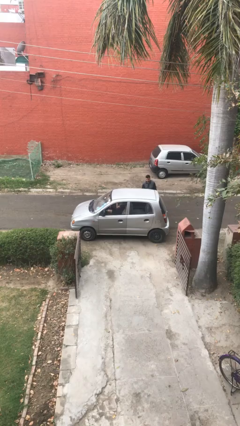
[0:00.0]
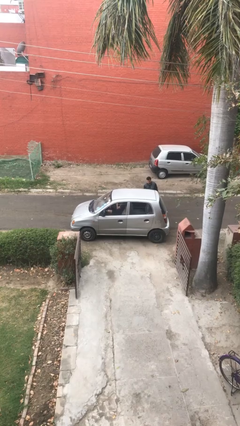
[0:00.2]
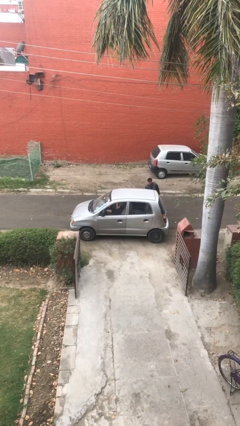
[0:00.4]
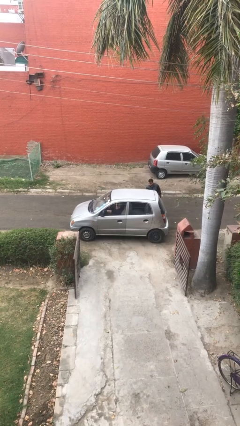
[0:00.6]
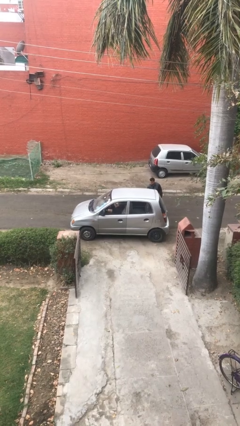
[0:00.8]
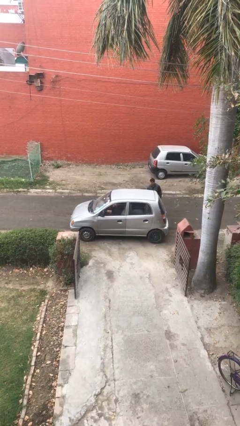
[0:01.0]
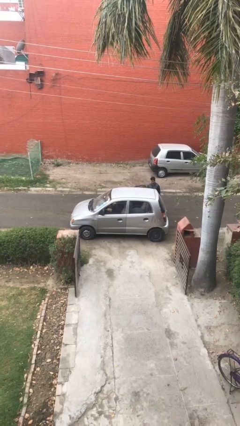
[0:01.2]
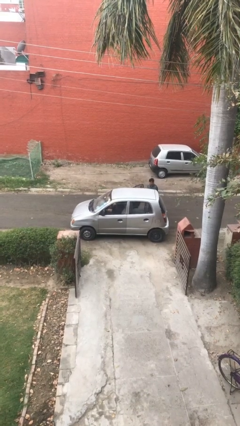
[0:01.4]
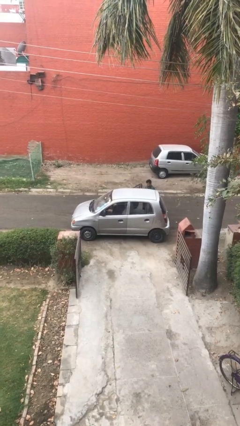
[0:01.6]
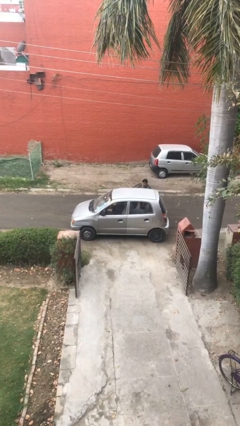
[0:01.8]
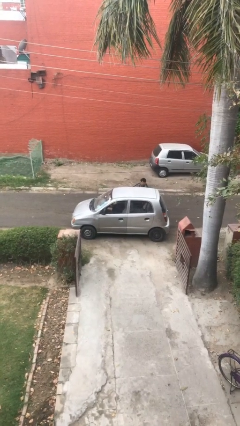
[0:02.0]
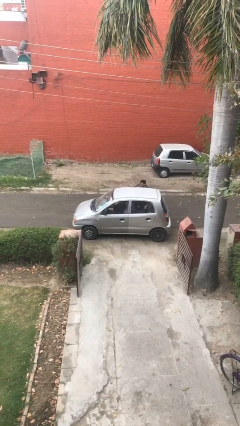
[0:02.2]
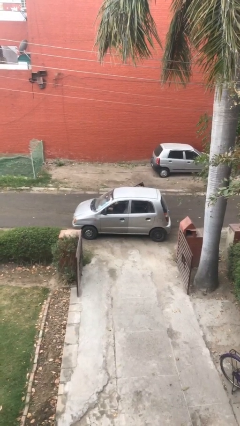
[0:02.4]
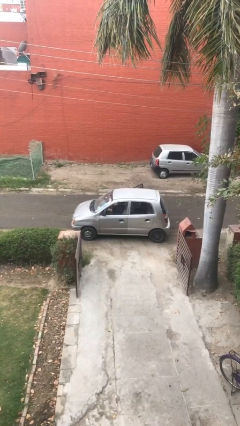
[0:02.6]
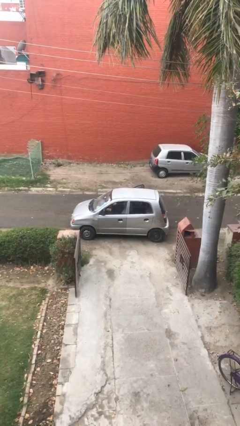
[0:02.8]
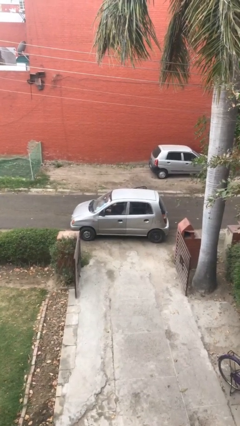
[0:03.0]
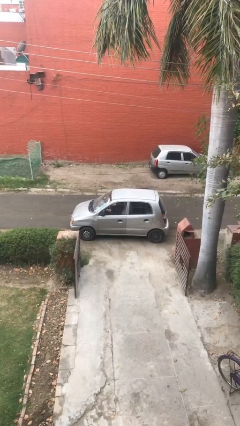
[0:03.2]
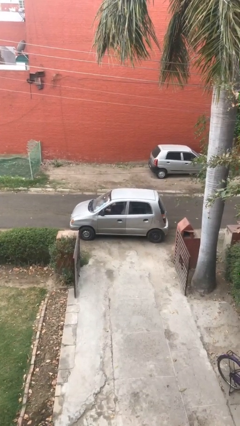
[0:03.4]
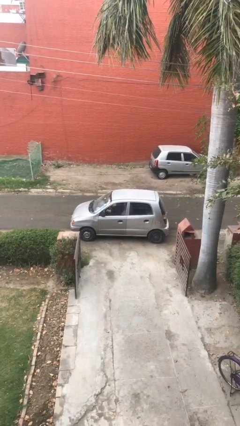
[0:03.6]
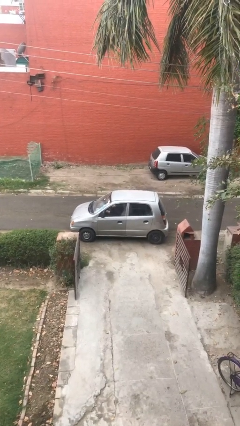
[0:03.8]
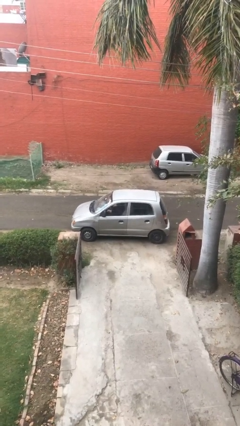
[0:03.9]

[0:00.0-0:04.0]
car picks up person

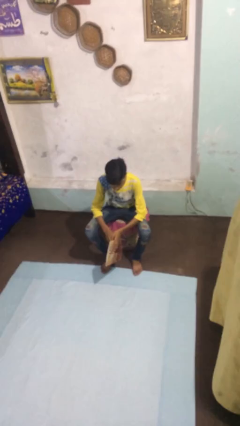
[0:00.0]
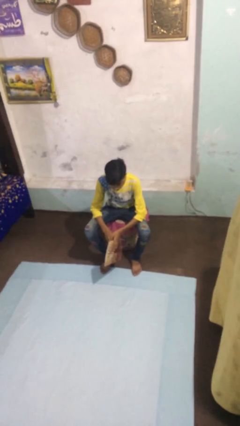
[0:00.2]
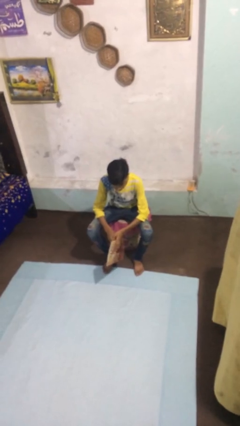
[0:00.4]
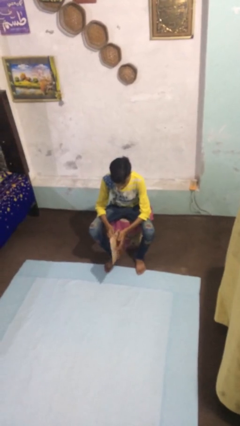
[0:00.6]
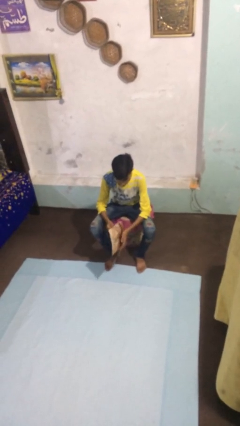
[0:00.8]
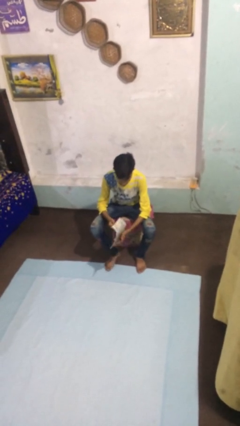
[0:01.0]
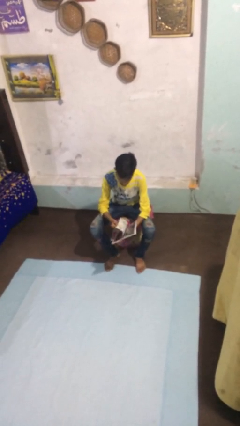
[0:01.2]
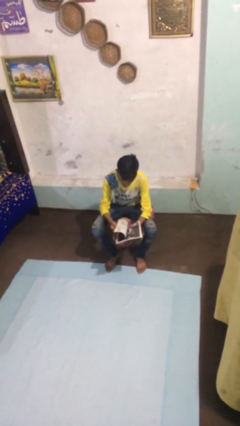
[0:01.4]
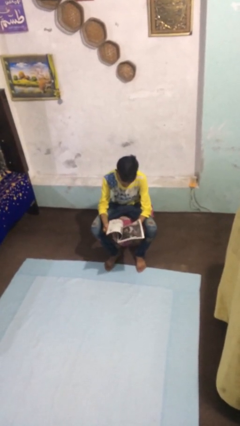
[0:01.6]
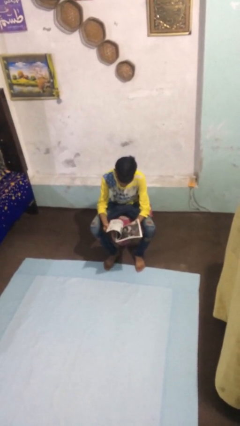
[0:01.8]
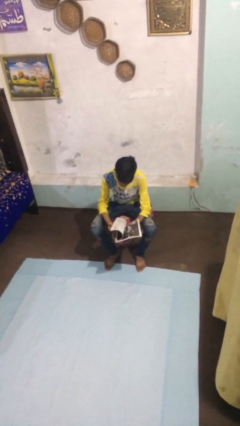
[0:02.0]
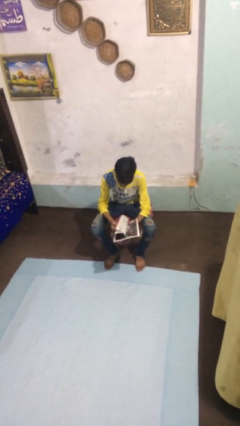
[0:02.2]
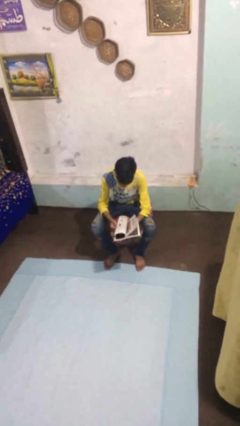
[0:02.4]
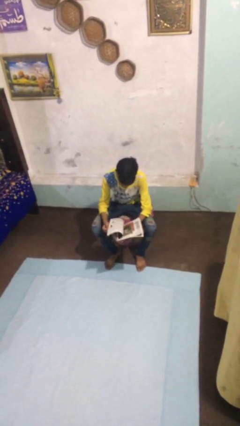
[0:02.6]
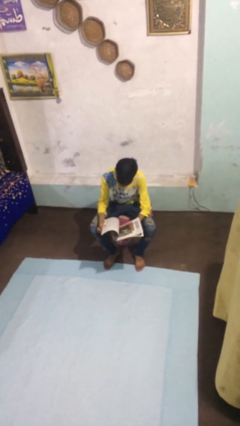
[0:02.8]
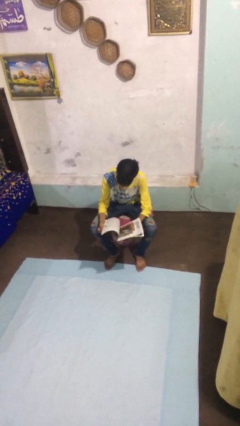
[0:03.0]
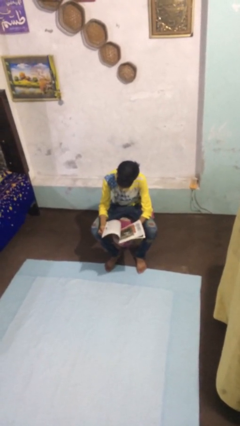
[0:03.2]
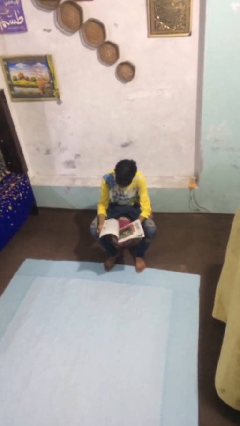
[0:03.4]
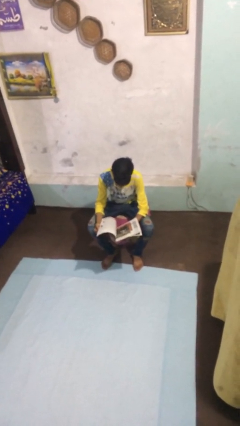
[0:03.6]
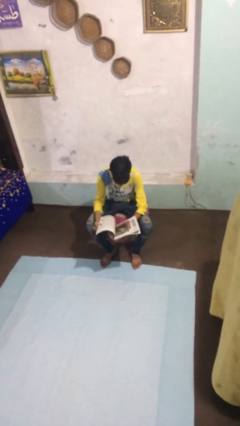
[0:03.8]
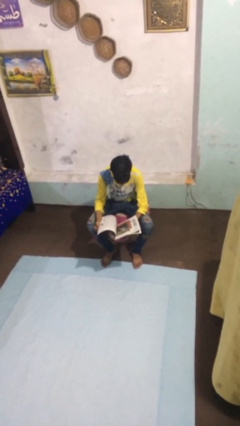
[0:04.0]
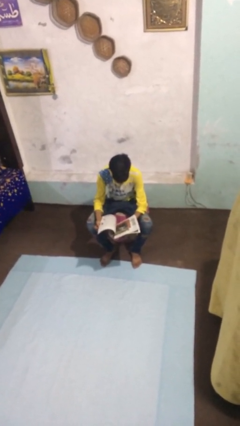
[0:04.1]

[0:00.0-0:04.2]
person reads document

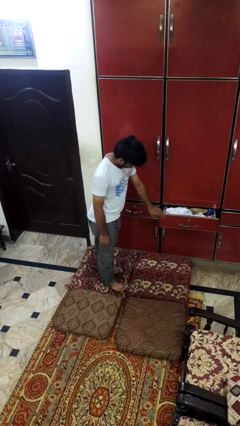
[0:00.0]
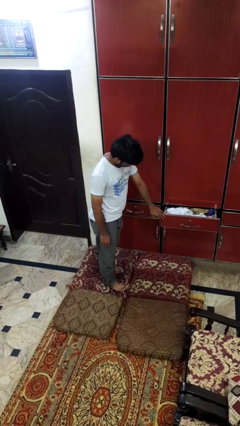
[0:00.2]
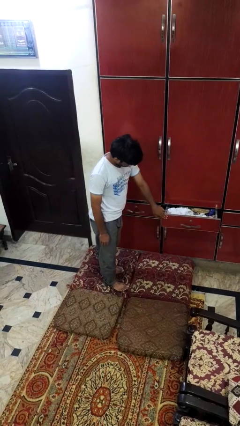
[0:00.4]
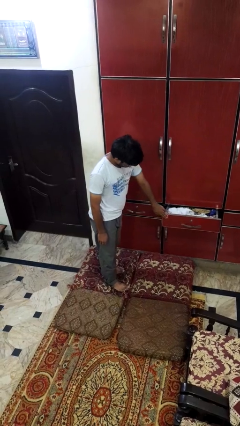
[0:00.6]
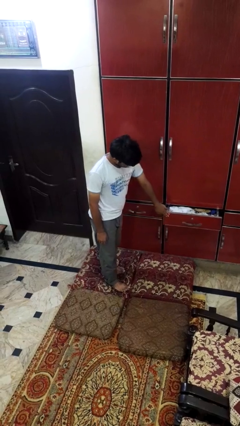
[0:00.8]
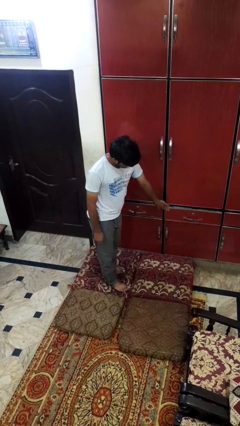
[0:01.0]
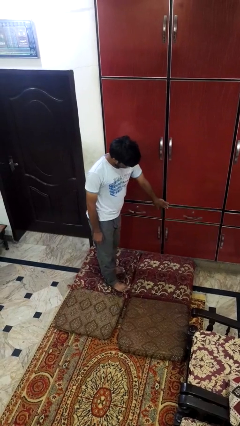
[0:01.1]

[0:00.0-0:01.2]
person closes dresser drawer

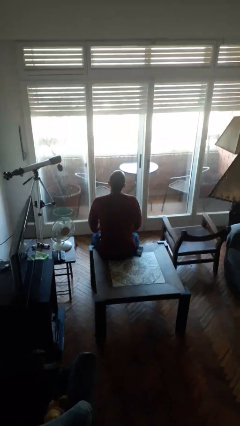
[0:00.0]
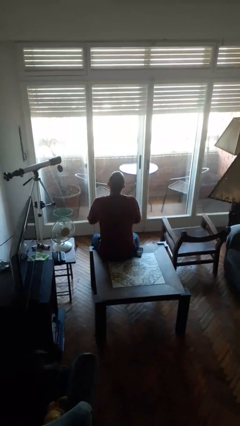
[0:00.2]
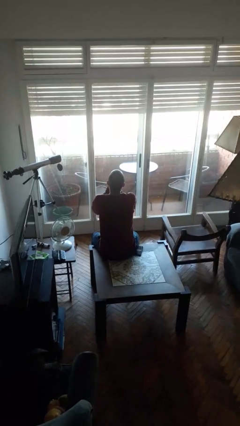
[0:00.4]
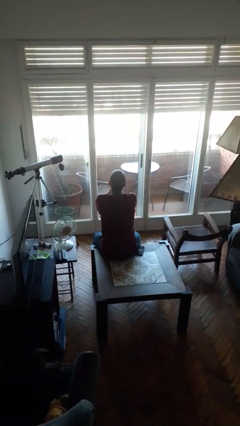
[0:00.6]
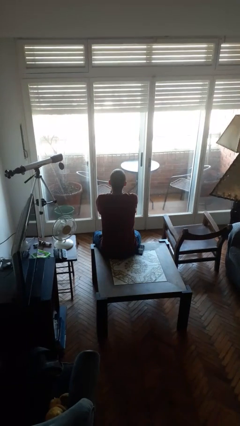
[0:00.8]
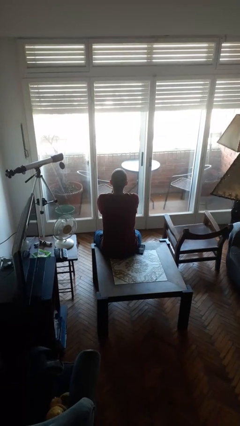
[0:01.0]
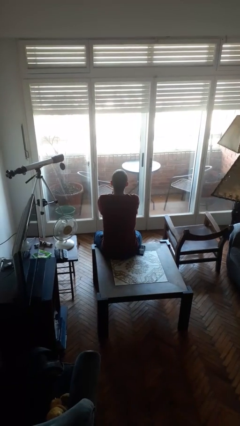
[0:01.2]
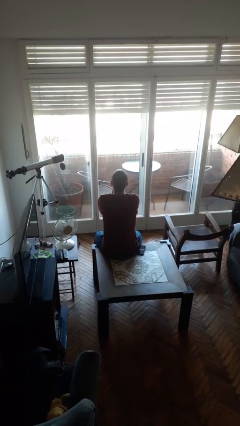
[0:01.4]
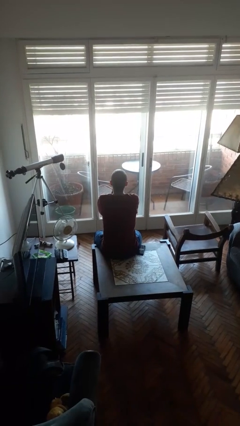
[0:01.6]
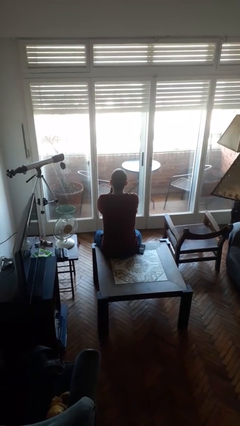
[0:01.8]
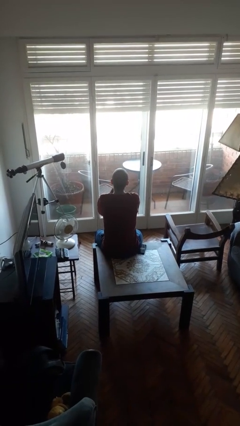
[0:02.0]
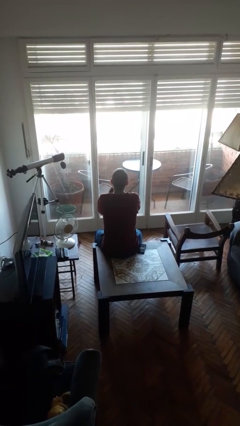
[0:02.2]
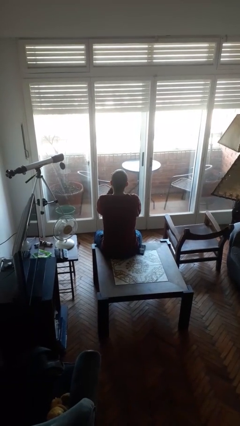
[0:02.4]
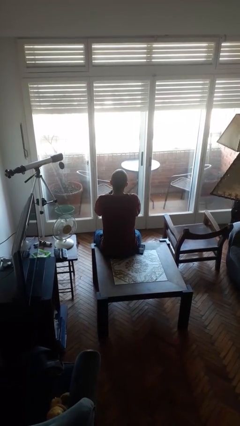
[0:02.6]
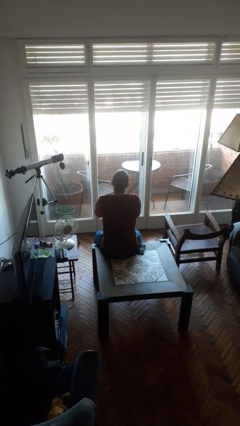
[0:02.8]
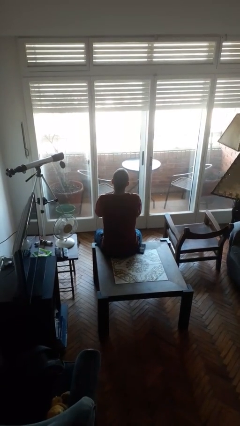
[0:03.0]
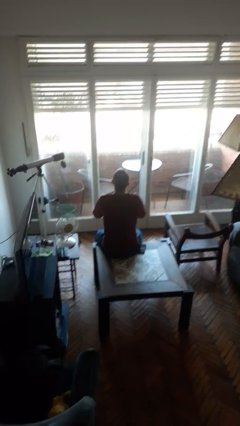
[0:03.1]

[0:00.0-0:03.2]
person blows into hands

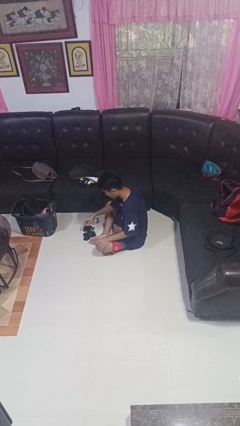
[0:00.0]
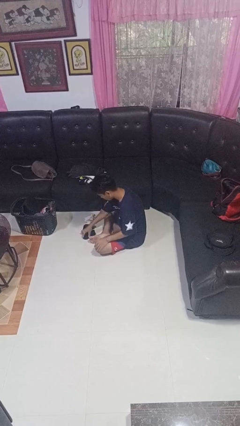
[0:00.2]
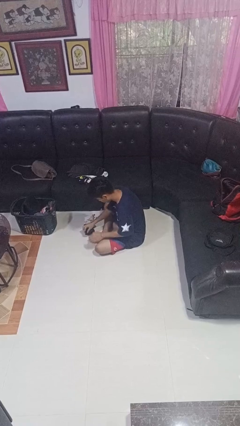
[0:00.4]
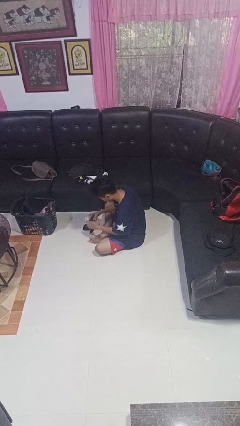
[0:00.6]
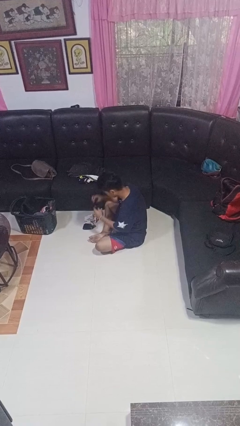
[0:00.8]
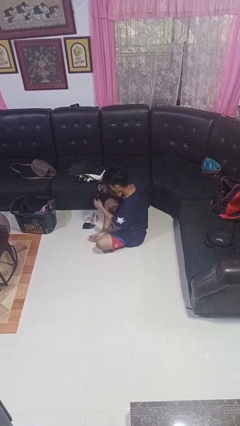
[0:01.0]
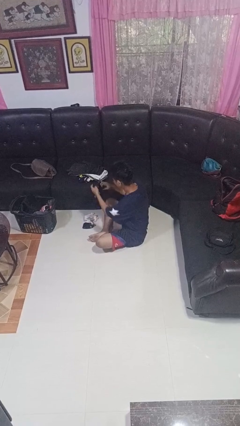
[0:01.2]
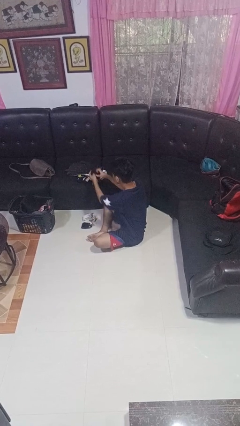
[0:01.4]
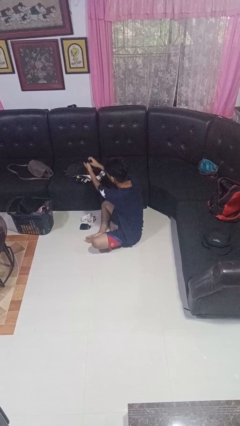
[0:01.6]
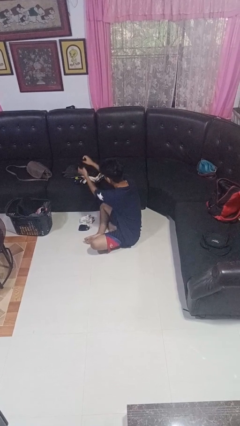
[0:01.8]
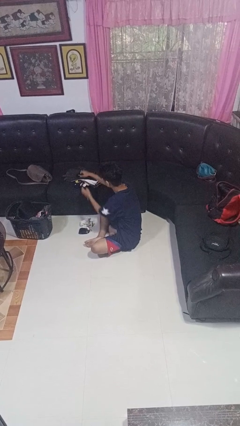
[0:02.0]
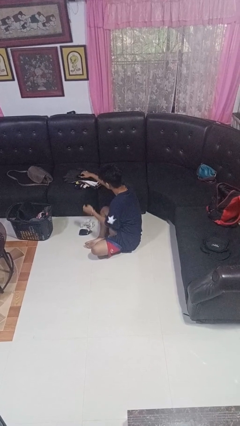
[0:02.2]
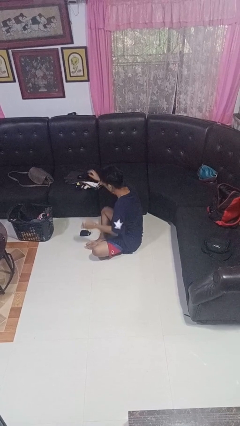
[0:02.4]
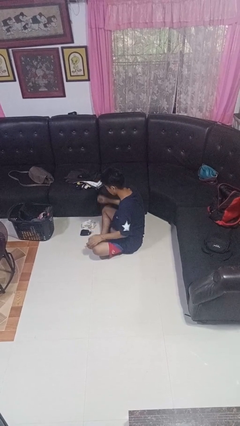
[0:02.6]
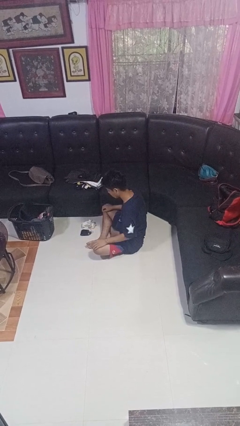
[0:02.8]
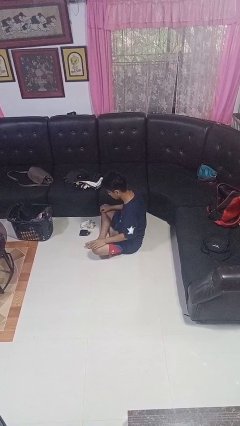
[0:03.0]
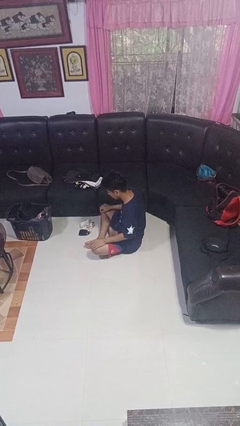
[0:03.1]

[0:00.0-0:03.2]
person folds socks

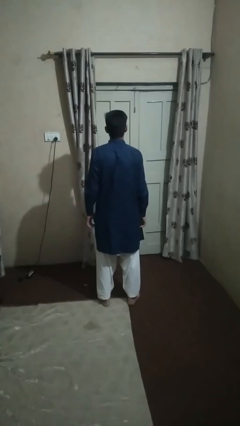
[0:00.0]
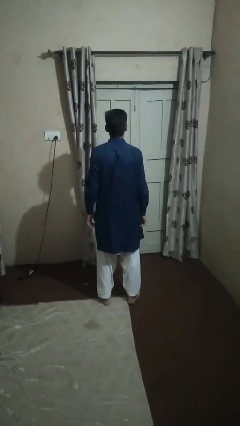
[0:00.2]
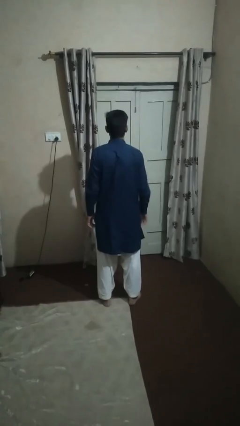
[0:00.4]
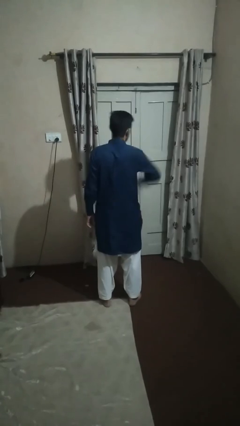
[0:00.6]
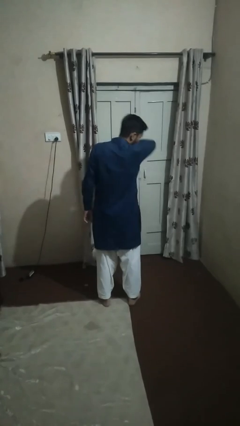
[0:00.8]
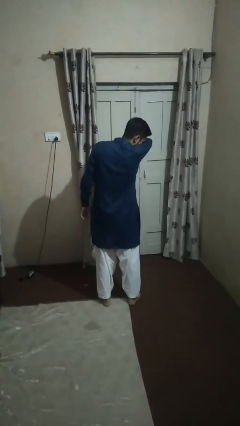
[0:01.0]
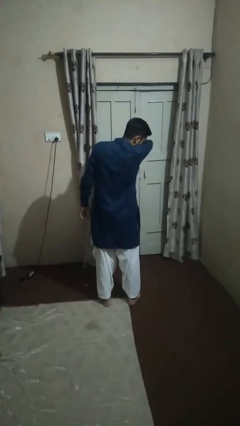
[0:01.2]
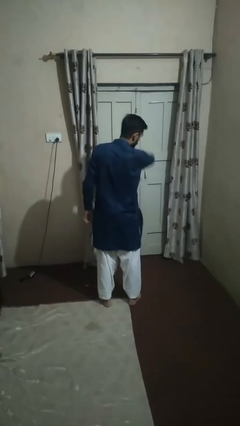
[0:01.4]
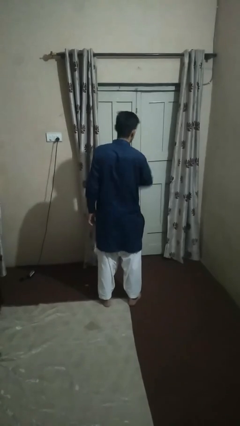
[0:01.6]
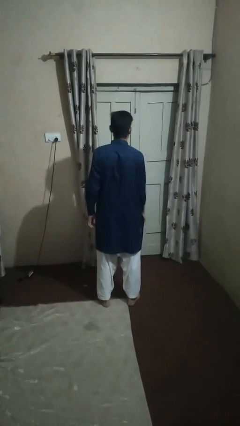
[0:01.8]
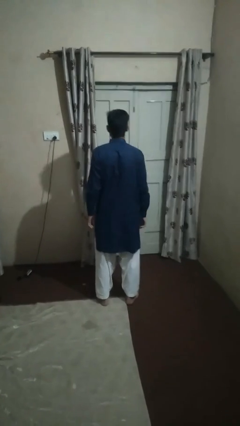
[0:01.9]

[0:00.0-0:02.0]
person sneezes into arm
